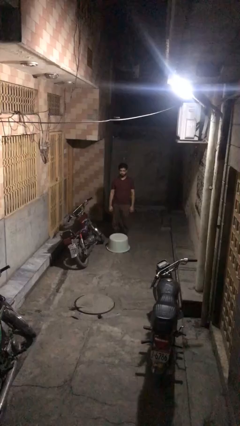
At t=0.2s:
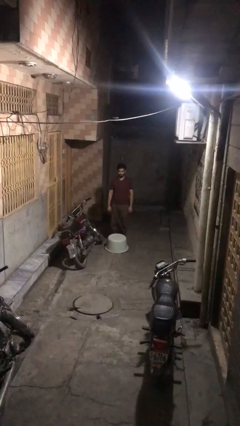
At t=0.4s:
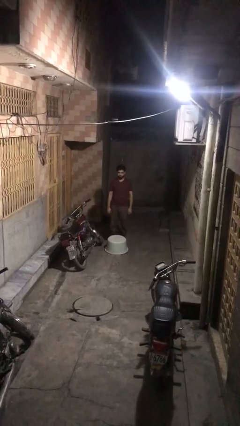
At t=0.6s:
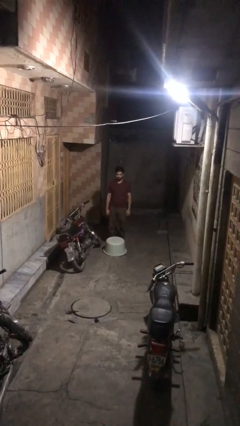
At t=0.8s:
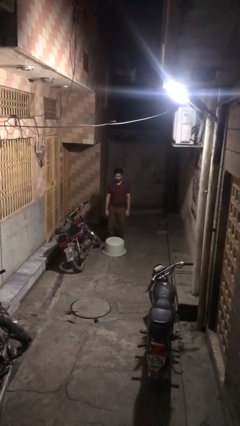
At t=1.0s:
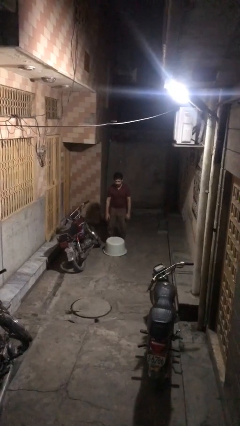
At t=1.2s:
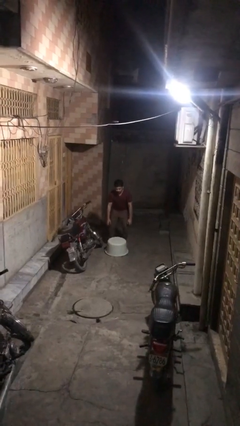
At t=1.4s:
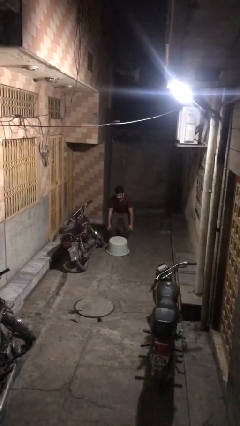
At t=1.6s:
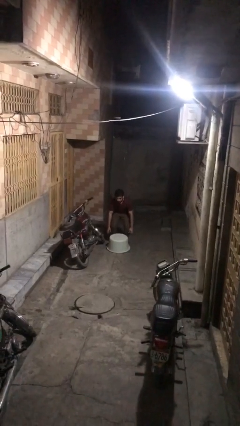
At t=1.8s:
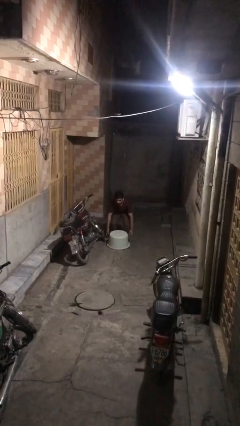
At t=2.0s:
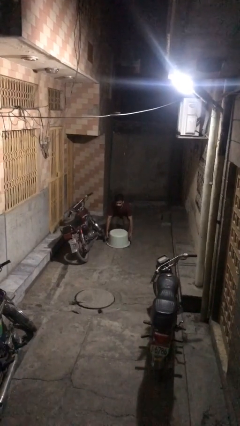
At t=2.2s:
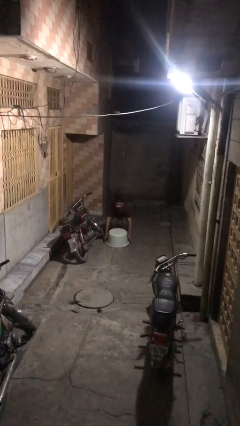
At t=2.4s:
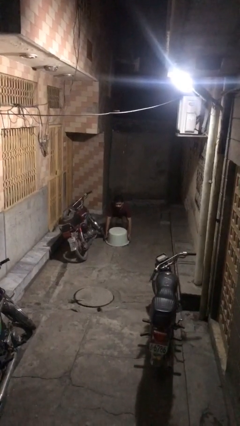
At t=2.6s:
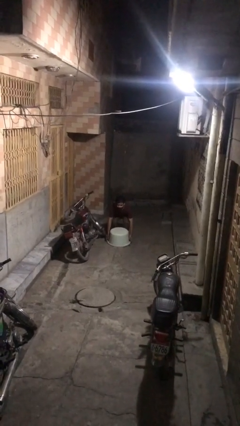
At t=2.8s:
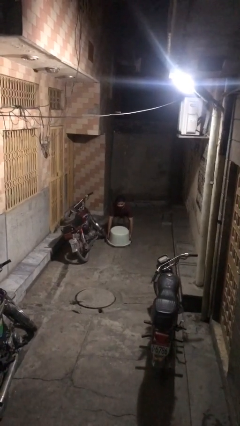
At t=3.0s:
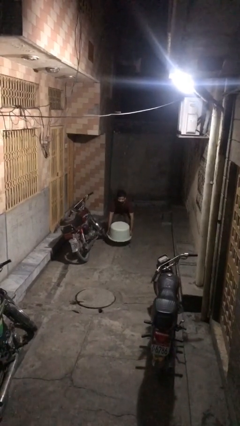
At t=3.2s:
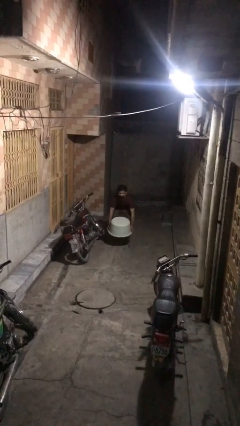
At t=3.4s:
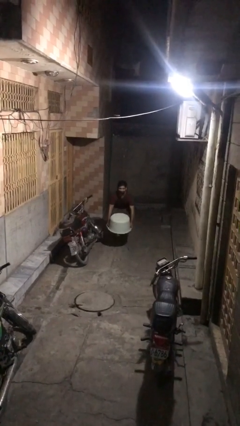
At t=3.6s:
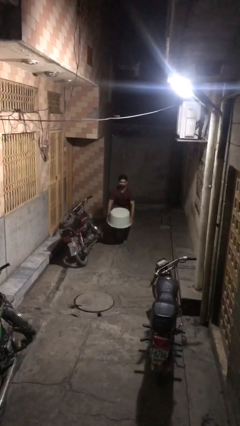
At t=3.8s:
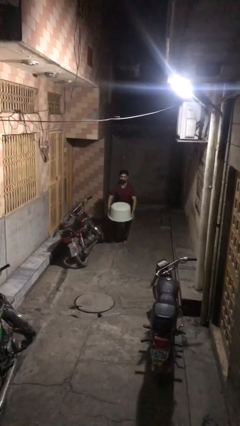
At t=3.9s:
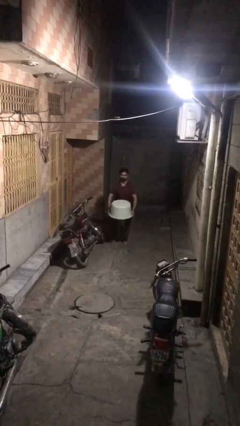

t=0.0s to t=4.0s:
person picks up object from floor

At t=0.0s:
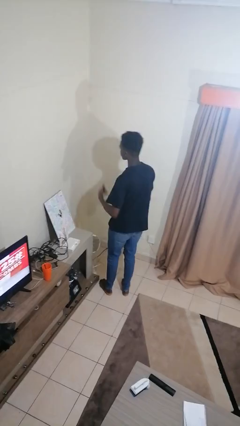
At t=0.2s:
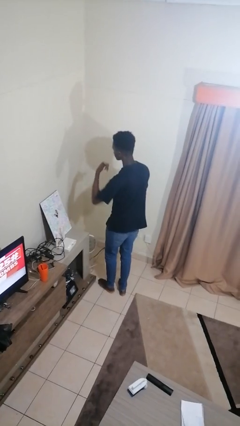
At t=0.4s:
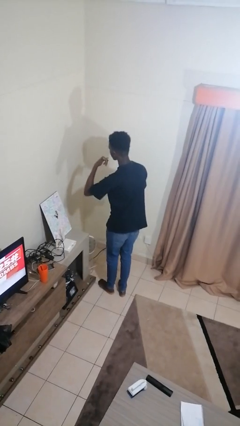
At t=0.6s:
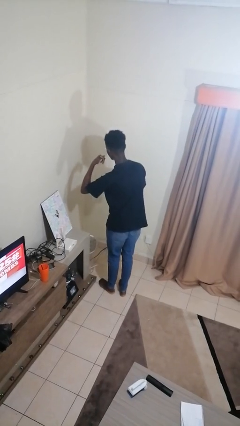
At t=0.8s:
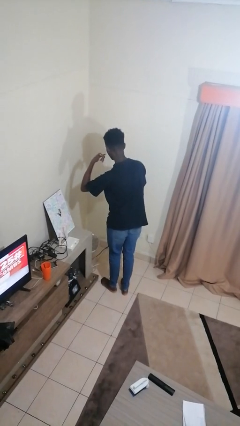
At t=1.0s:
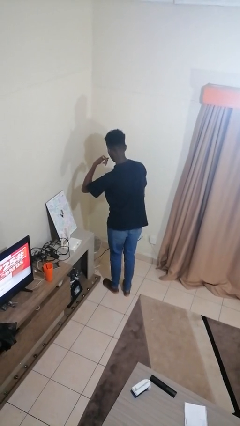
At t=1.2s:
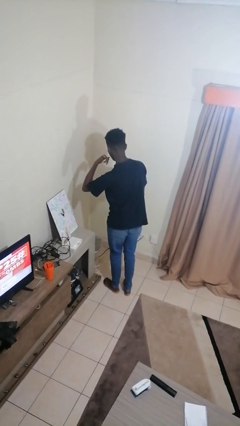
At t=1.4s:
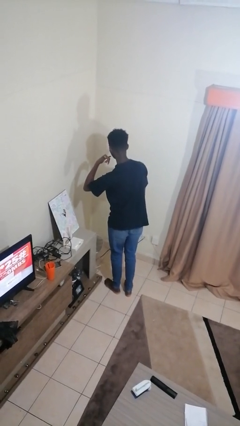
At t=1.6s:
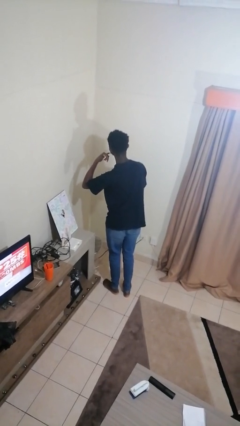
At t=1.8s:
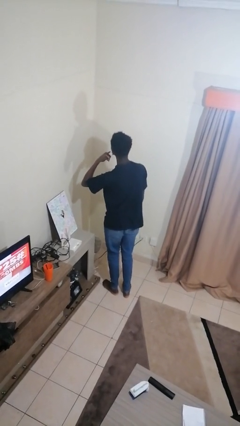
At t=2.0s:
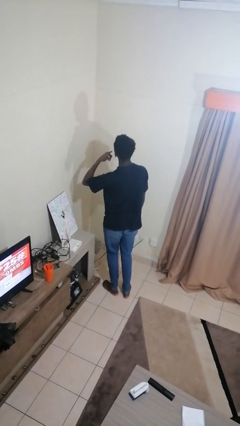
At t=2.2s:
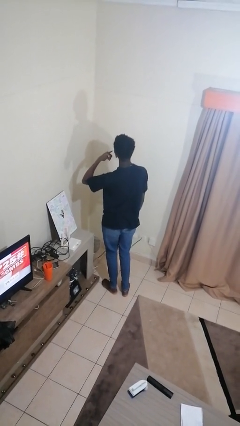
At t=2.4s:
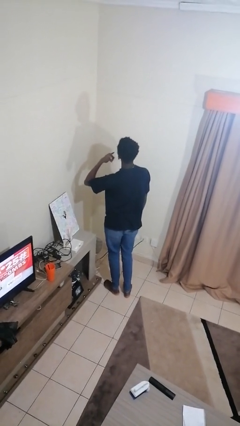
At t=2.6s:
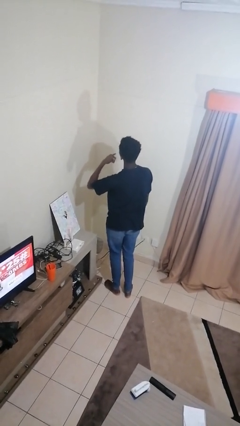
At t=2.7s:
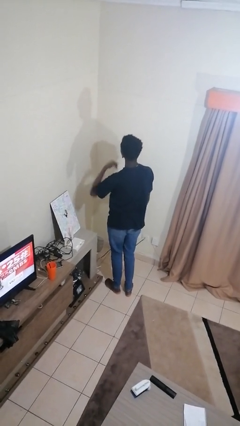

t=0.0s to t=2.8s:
person gestures call me

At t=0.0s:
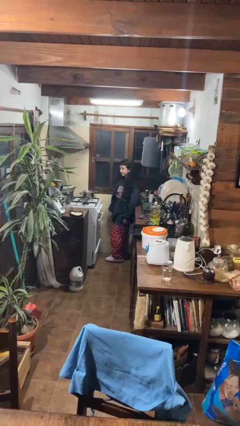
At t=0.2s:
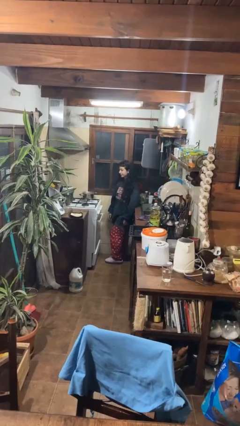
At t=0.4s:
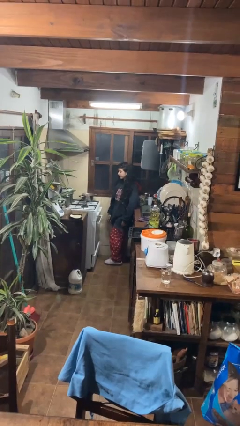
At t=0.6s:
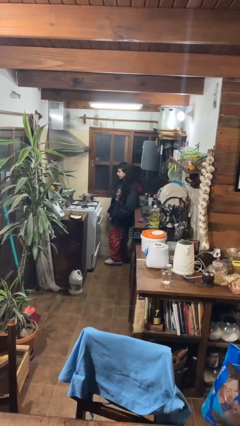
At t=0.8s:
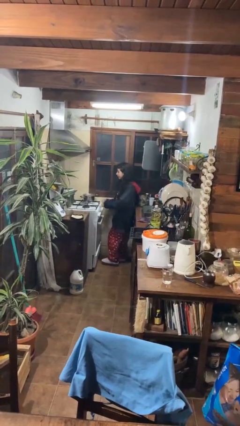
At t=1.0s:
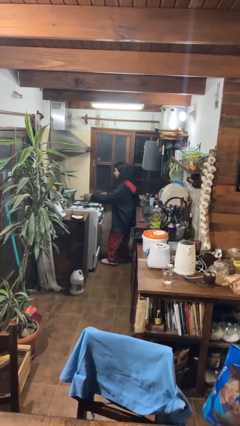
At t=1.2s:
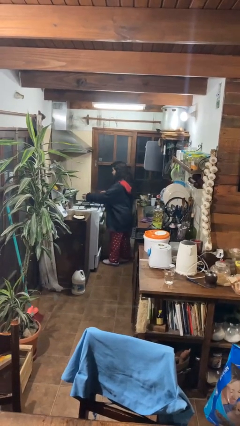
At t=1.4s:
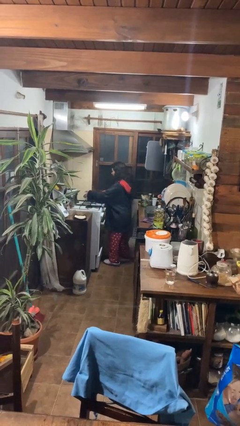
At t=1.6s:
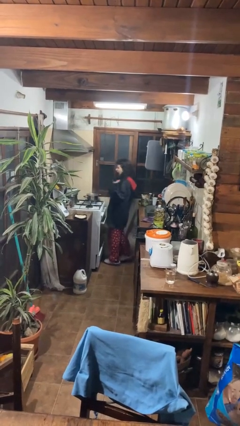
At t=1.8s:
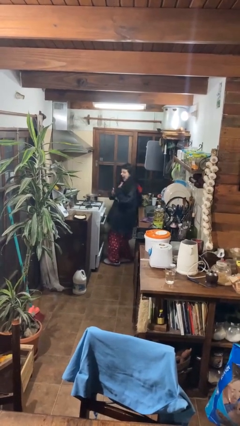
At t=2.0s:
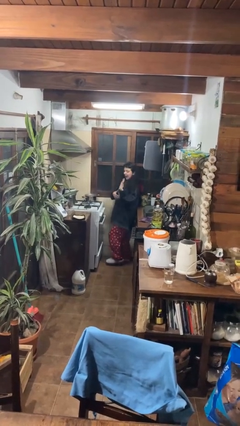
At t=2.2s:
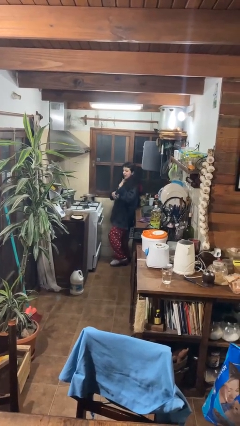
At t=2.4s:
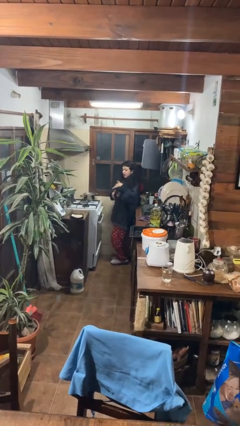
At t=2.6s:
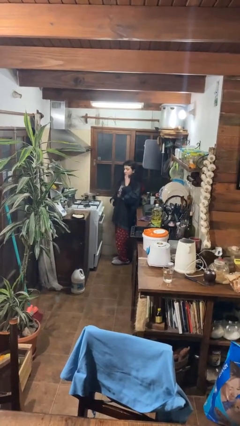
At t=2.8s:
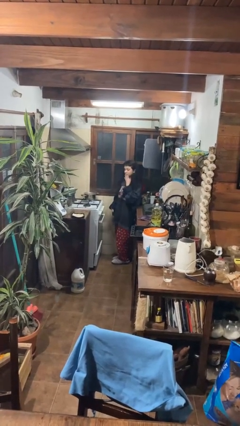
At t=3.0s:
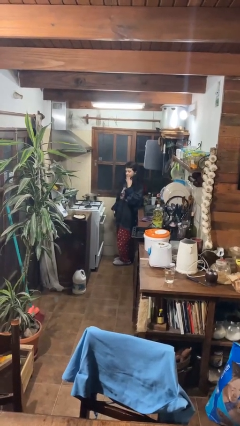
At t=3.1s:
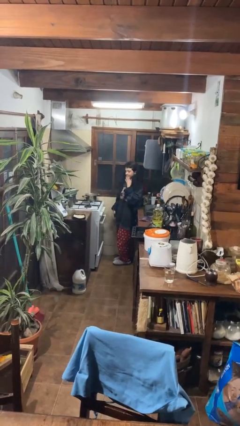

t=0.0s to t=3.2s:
person burns hand

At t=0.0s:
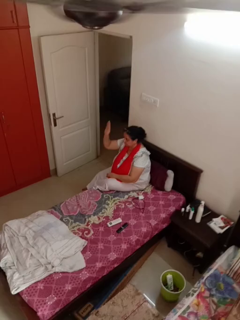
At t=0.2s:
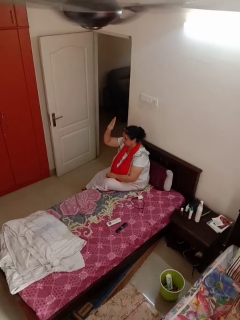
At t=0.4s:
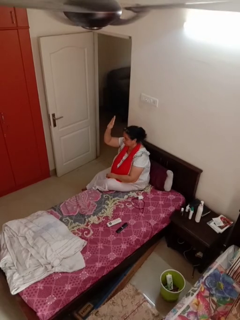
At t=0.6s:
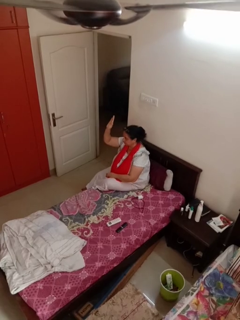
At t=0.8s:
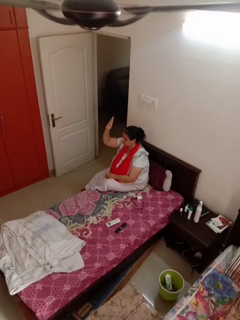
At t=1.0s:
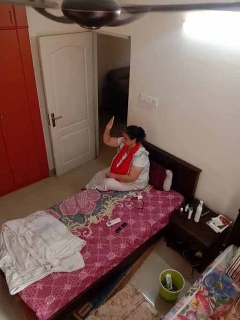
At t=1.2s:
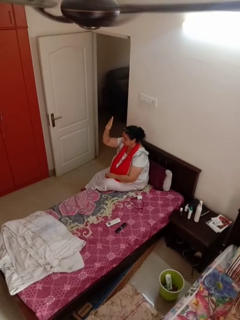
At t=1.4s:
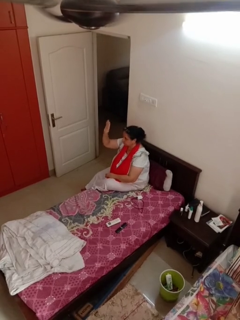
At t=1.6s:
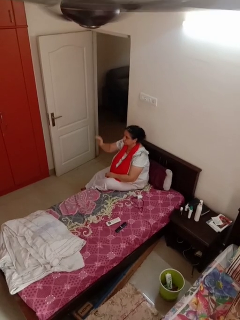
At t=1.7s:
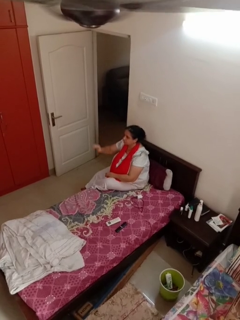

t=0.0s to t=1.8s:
person gestures raise hand

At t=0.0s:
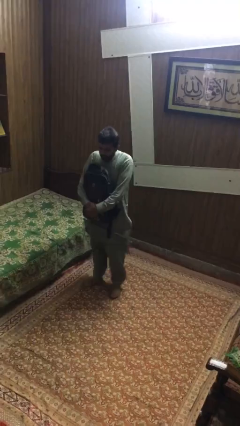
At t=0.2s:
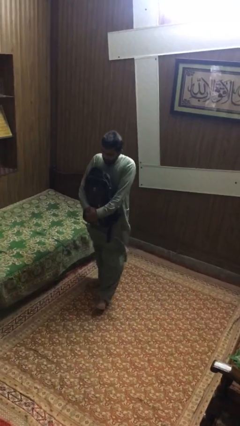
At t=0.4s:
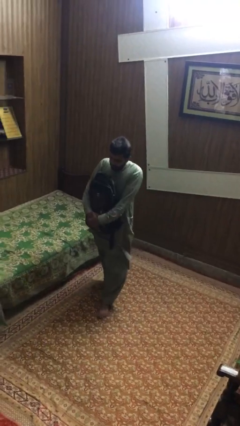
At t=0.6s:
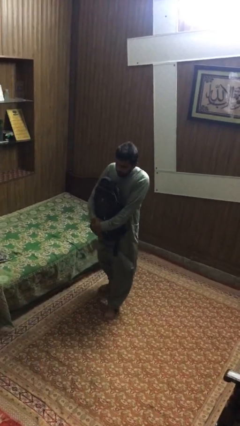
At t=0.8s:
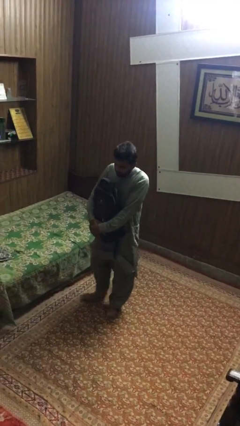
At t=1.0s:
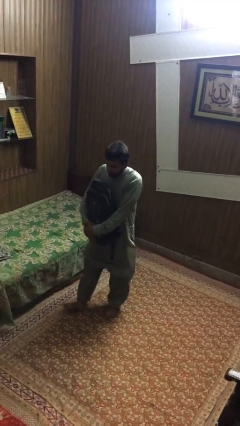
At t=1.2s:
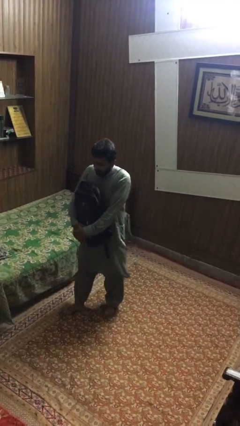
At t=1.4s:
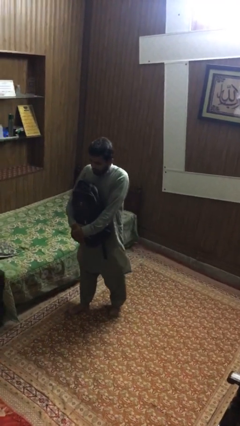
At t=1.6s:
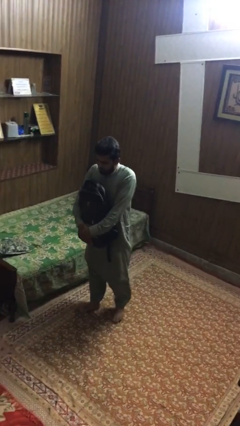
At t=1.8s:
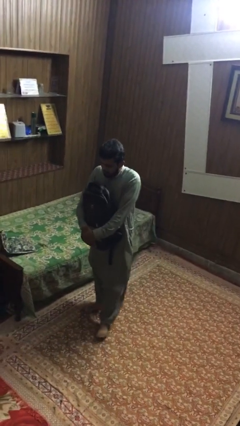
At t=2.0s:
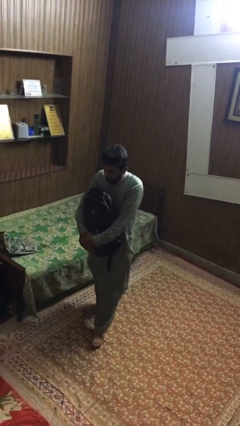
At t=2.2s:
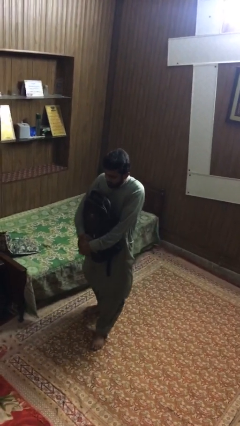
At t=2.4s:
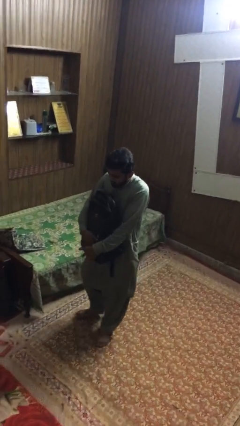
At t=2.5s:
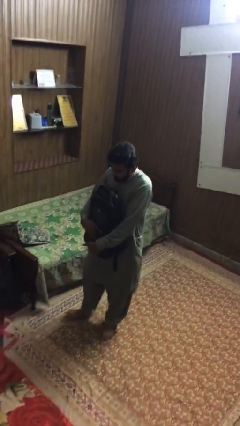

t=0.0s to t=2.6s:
person carries heavy object

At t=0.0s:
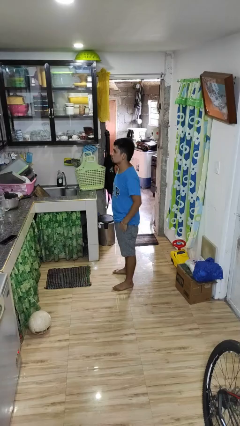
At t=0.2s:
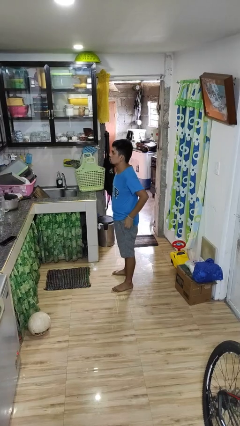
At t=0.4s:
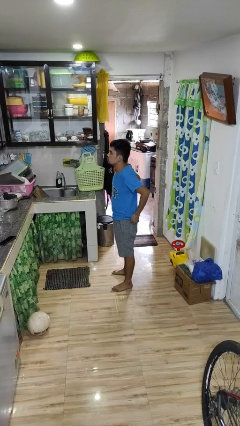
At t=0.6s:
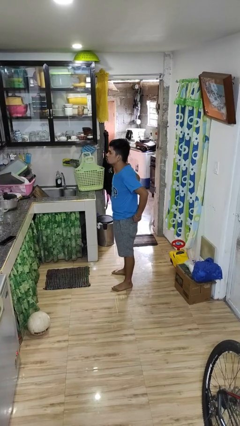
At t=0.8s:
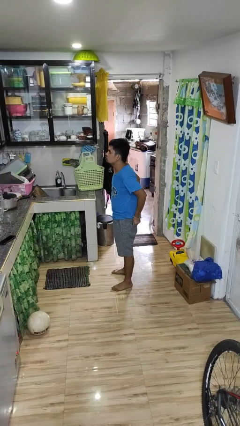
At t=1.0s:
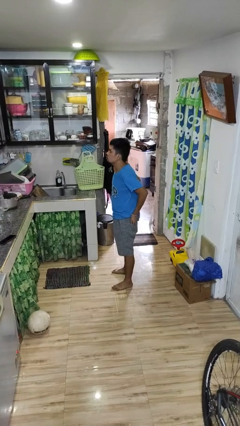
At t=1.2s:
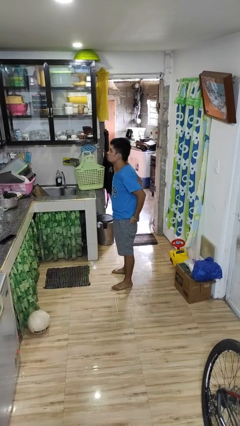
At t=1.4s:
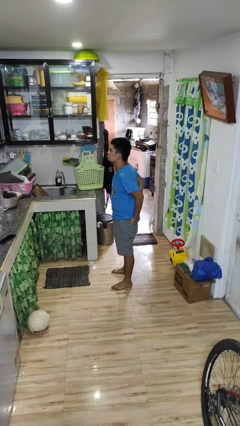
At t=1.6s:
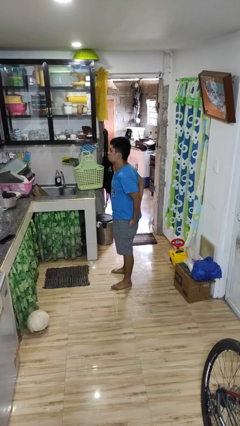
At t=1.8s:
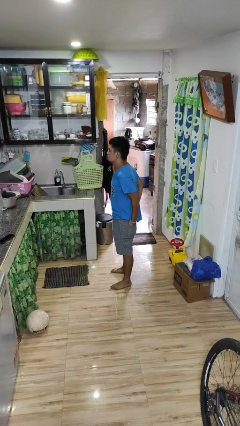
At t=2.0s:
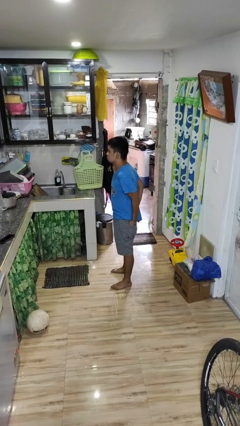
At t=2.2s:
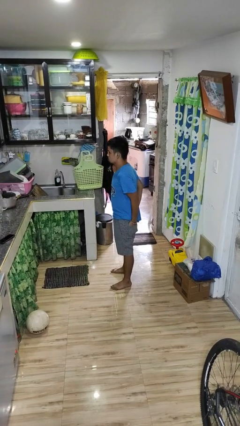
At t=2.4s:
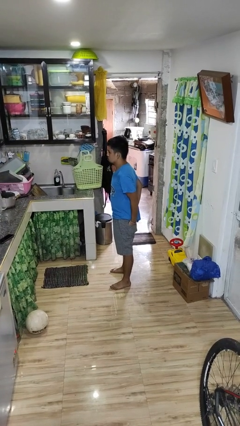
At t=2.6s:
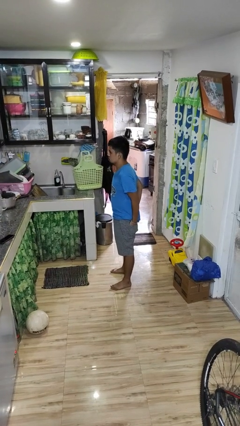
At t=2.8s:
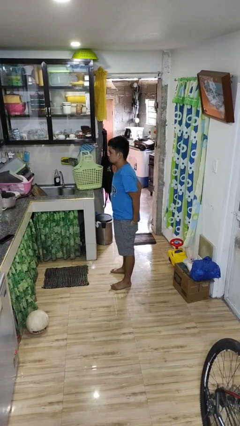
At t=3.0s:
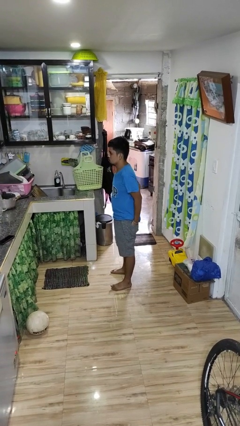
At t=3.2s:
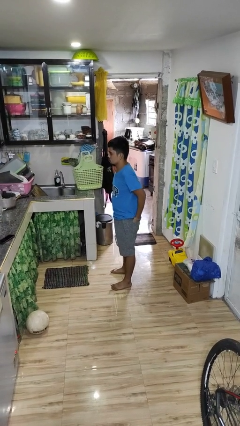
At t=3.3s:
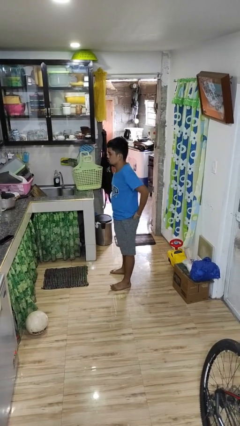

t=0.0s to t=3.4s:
person puts hands in back pockets

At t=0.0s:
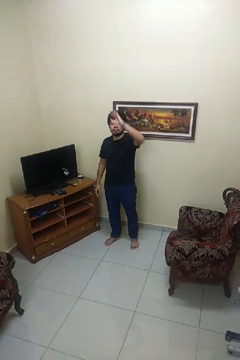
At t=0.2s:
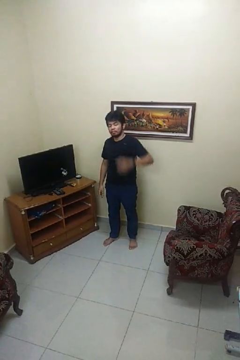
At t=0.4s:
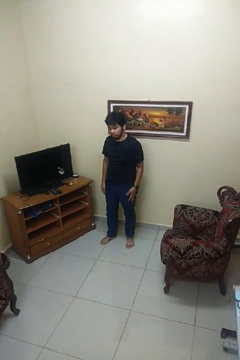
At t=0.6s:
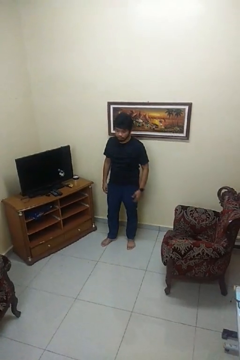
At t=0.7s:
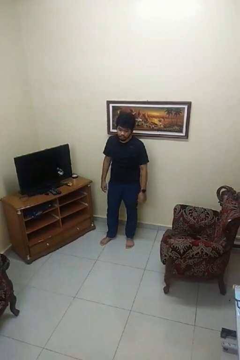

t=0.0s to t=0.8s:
person gestures lower hand
